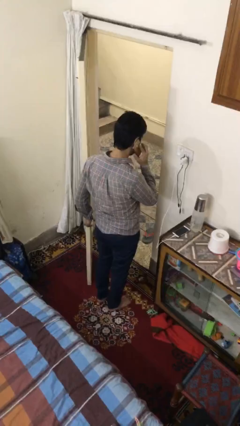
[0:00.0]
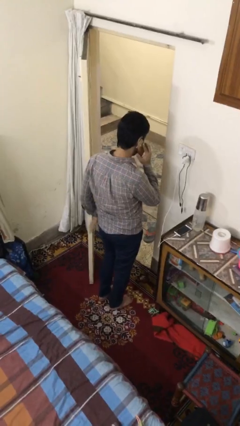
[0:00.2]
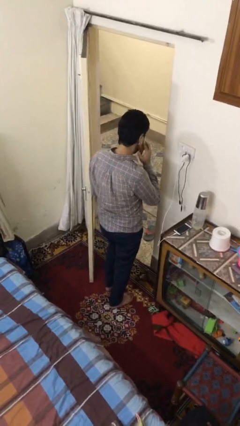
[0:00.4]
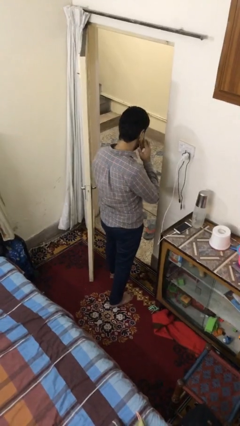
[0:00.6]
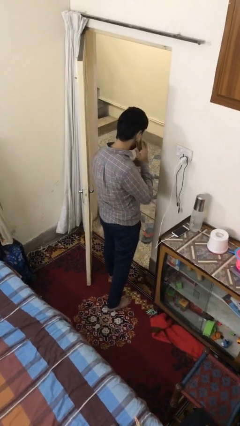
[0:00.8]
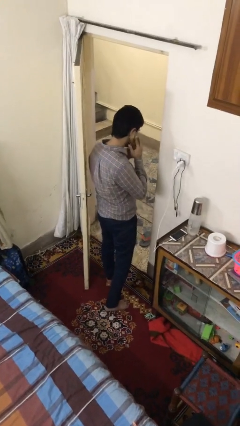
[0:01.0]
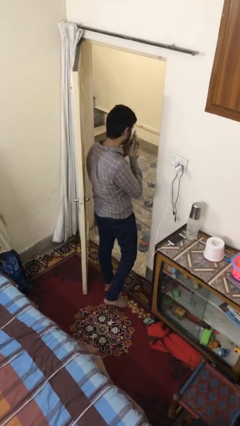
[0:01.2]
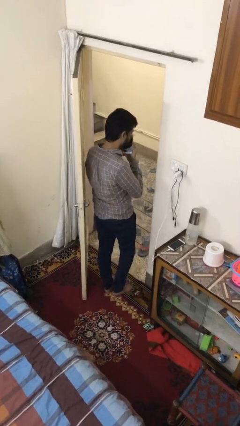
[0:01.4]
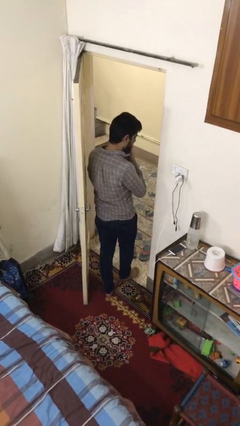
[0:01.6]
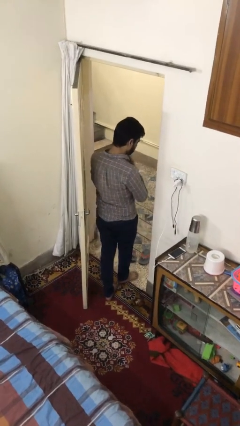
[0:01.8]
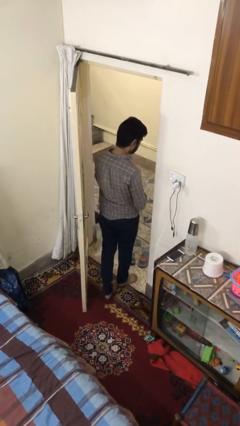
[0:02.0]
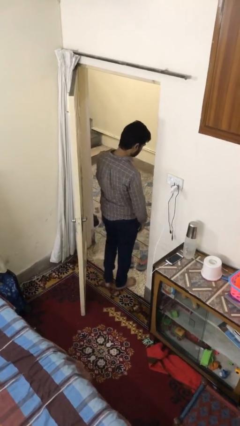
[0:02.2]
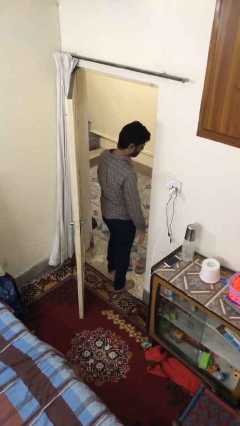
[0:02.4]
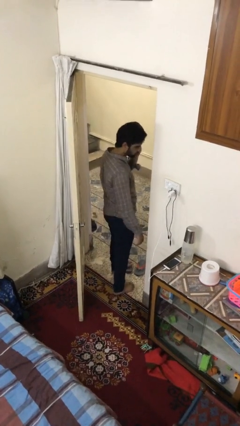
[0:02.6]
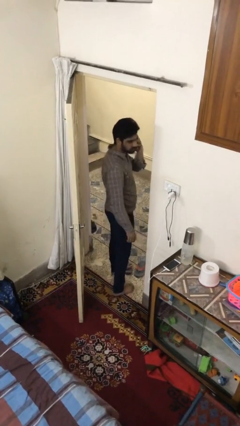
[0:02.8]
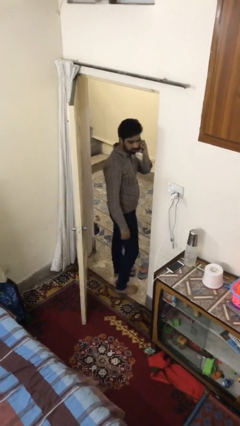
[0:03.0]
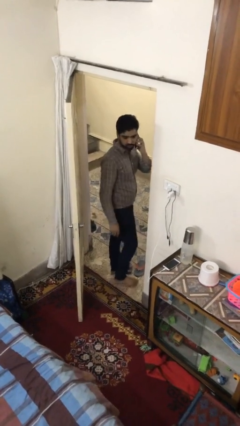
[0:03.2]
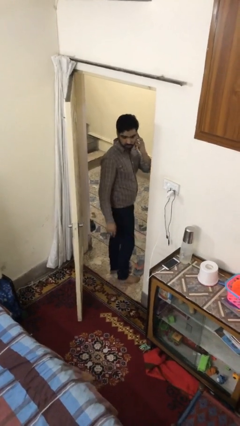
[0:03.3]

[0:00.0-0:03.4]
person exits scene through structure

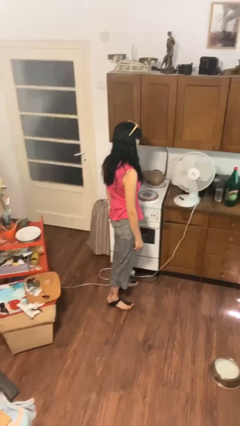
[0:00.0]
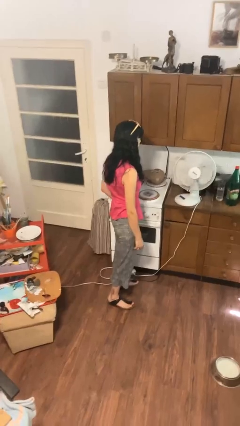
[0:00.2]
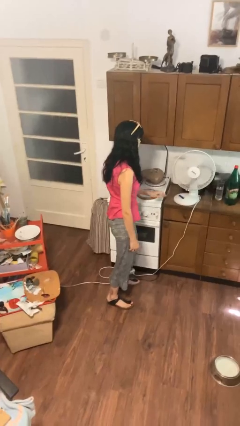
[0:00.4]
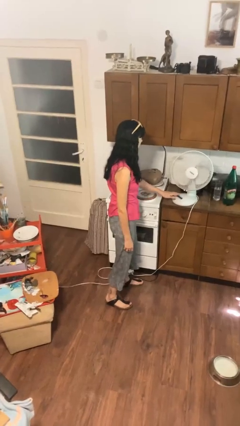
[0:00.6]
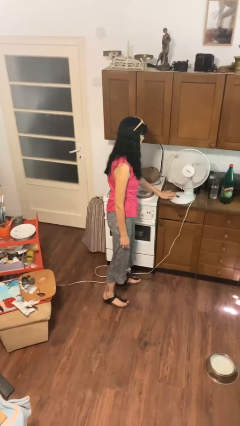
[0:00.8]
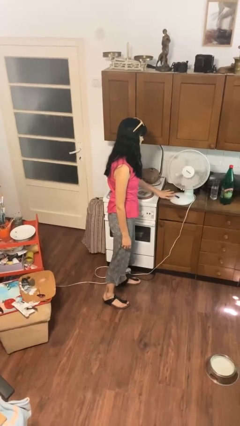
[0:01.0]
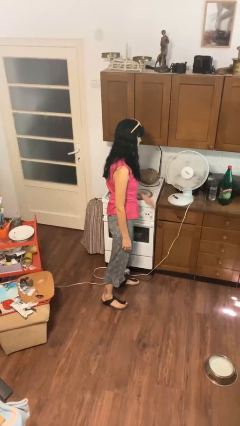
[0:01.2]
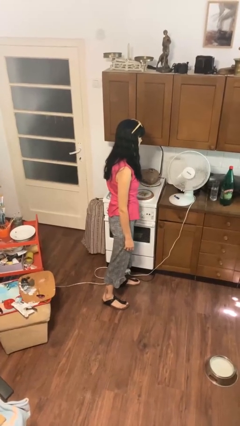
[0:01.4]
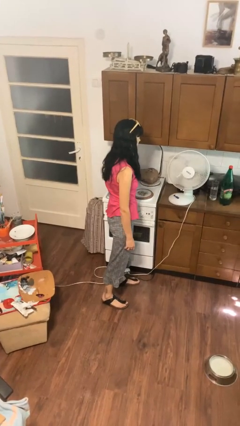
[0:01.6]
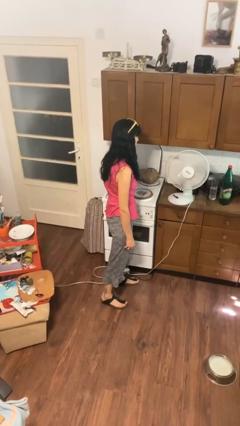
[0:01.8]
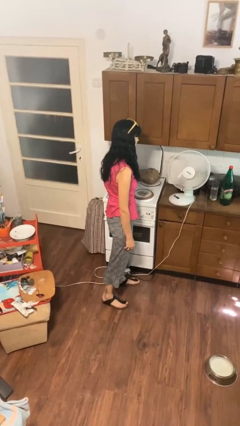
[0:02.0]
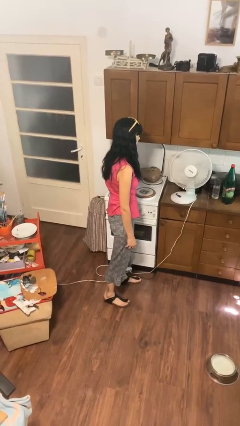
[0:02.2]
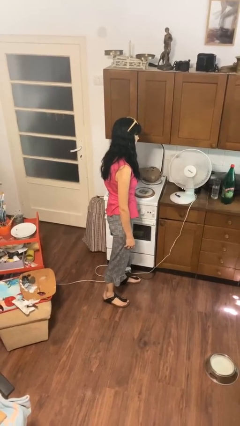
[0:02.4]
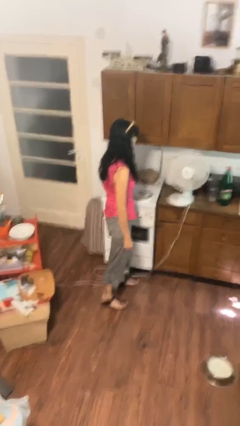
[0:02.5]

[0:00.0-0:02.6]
person turns on fan

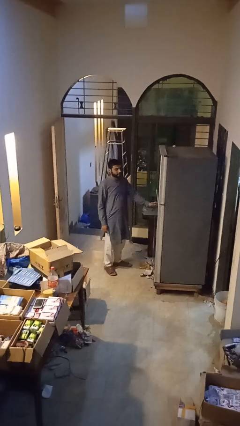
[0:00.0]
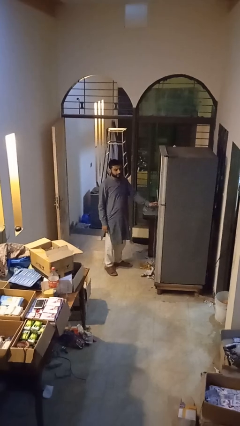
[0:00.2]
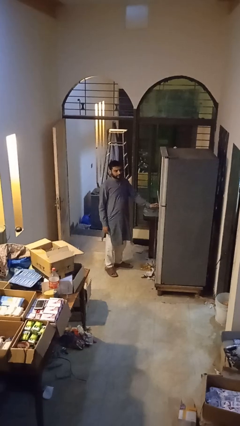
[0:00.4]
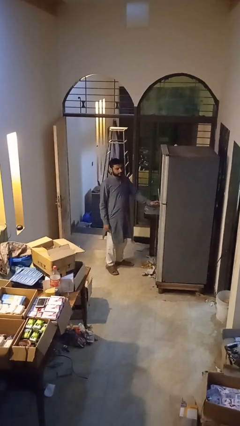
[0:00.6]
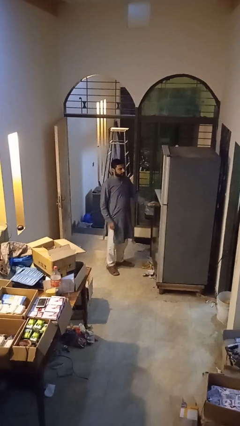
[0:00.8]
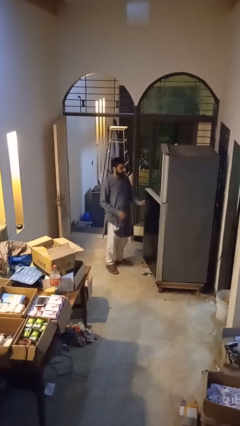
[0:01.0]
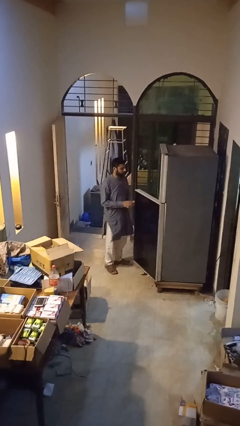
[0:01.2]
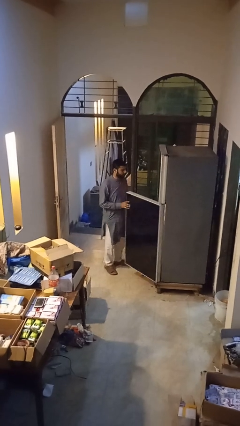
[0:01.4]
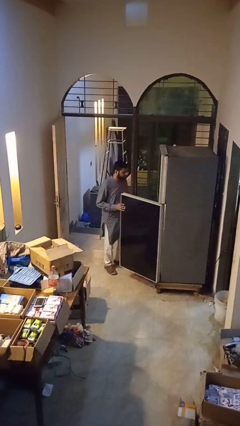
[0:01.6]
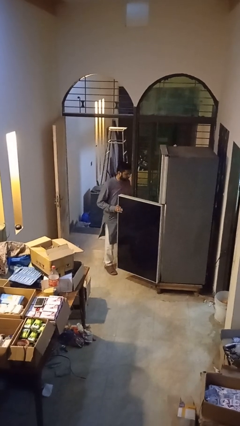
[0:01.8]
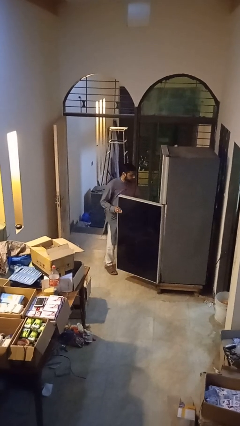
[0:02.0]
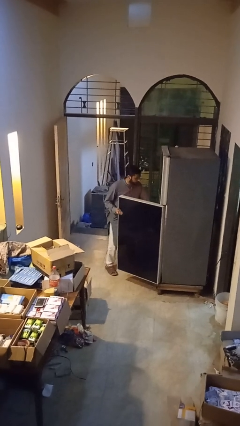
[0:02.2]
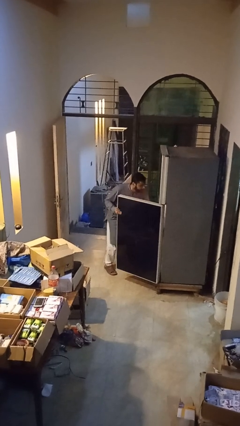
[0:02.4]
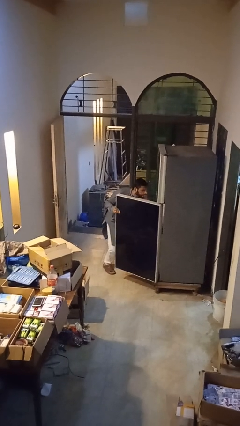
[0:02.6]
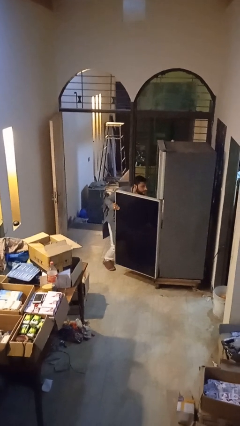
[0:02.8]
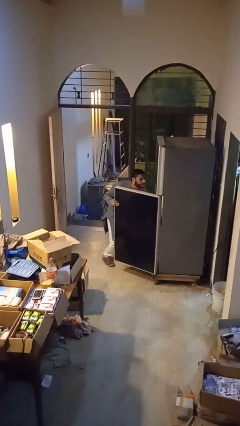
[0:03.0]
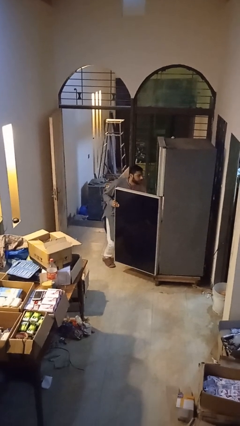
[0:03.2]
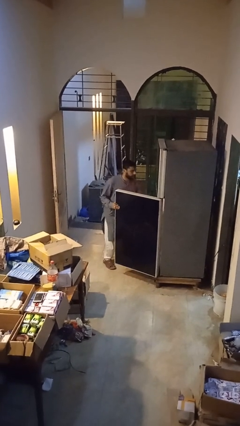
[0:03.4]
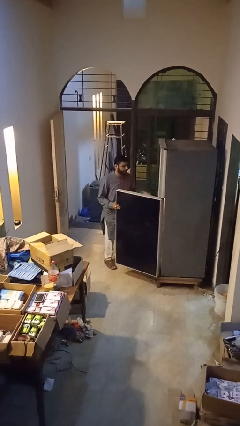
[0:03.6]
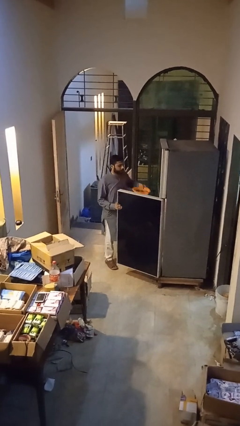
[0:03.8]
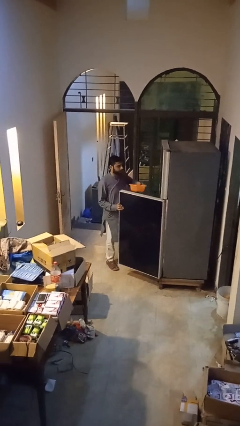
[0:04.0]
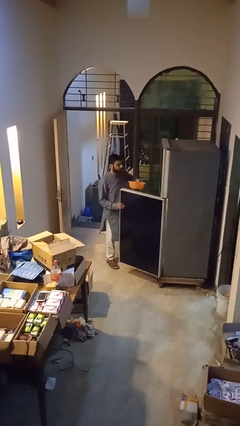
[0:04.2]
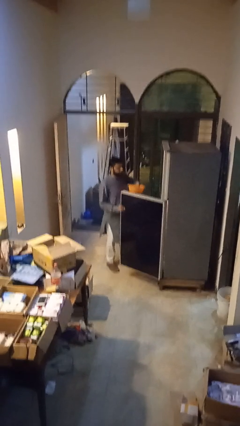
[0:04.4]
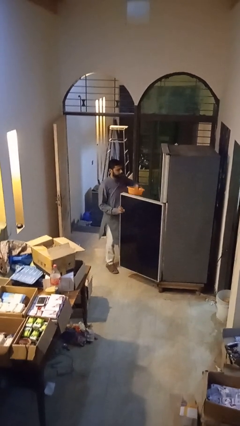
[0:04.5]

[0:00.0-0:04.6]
person puts object into refrigerator

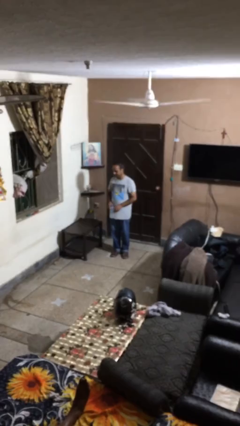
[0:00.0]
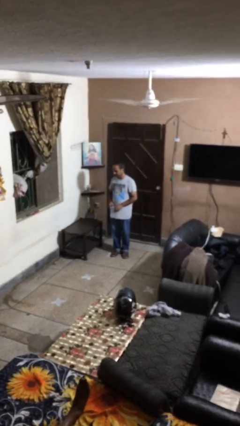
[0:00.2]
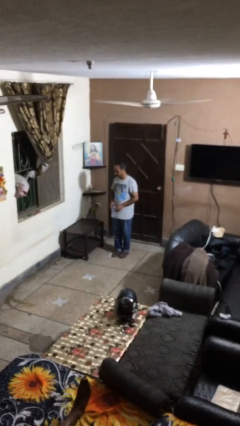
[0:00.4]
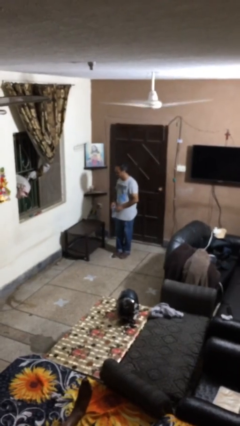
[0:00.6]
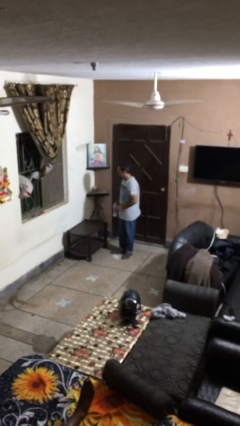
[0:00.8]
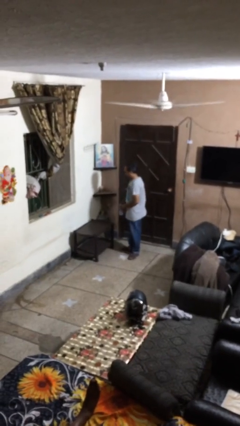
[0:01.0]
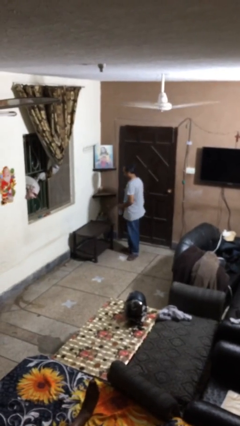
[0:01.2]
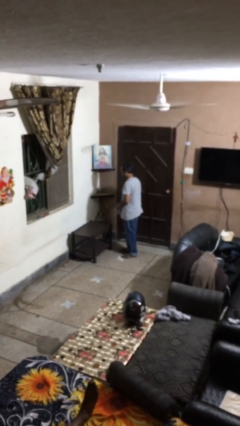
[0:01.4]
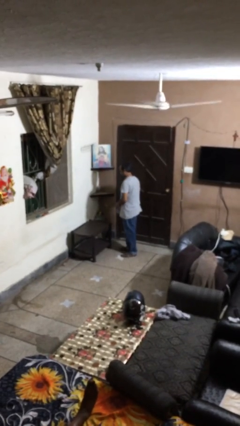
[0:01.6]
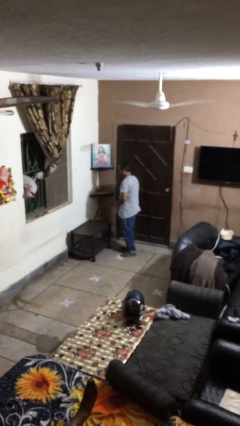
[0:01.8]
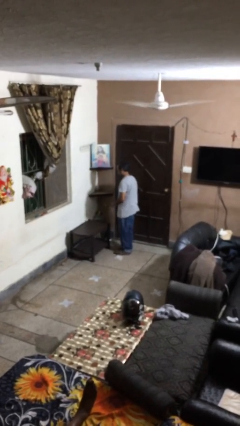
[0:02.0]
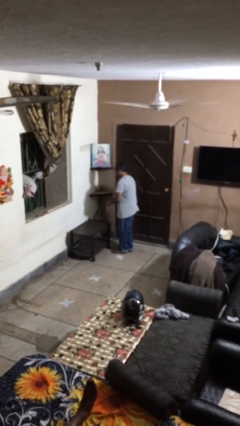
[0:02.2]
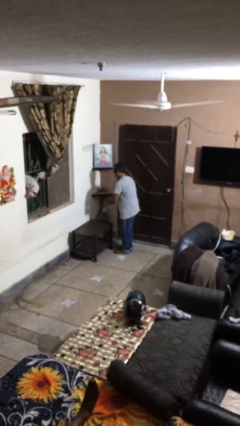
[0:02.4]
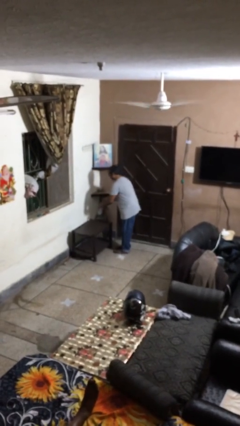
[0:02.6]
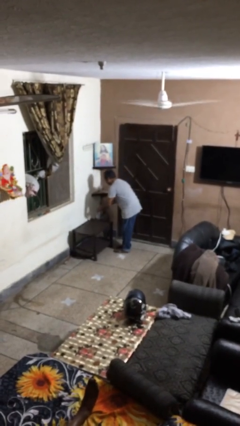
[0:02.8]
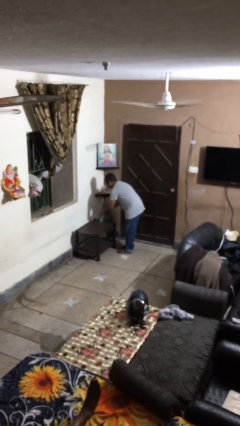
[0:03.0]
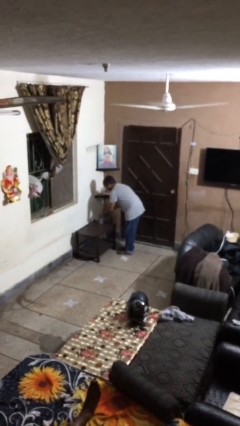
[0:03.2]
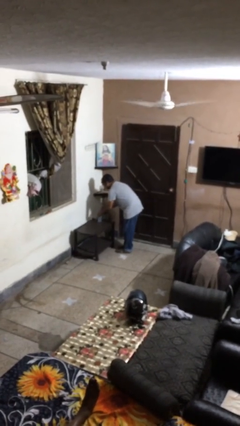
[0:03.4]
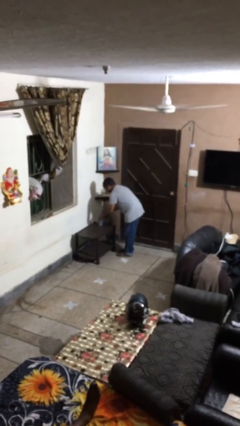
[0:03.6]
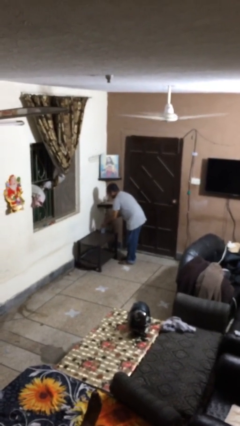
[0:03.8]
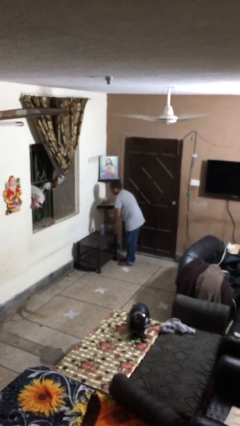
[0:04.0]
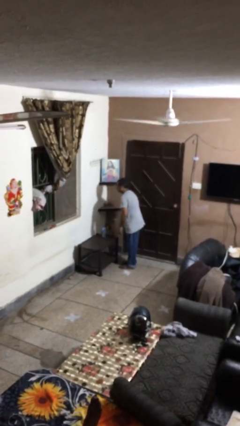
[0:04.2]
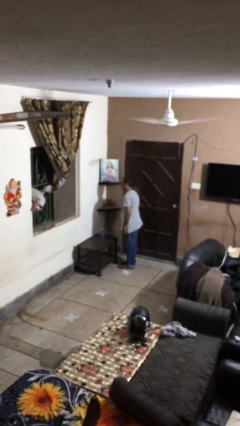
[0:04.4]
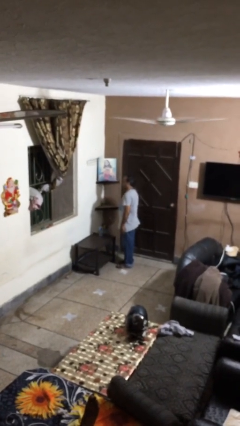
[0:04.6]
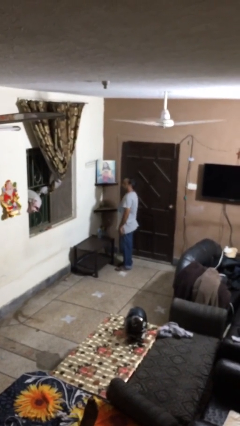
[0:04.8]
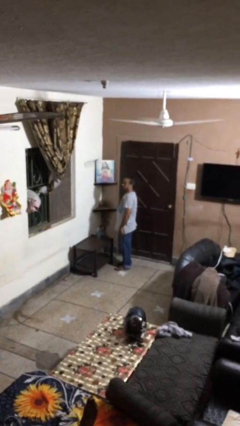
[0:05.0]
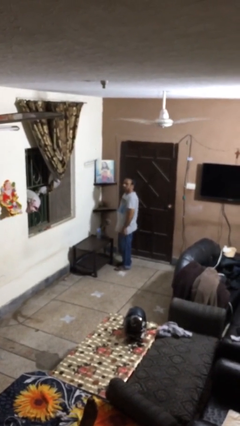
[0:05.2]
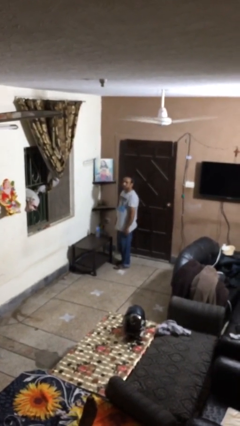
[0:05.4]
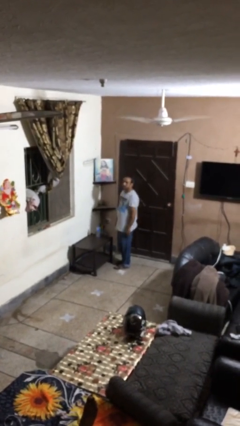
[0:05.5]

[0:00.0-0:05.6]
person puts down object on shelf

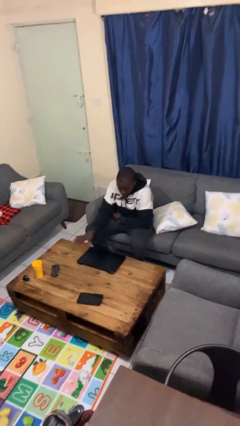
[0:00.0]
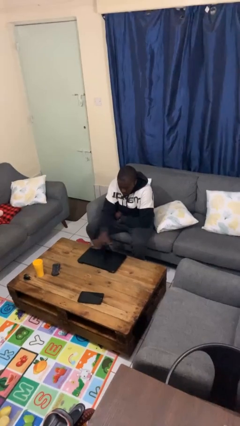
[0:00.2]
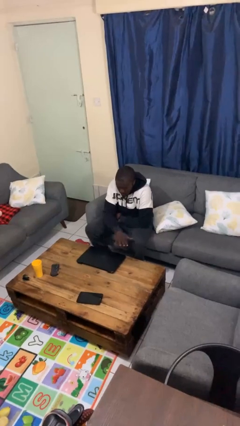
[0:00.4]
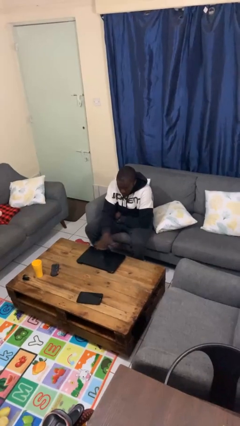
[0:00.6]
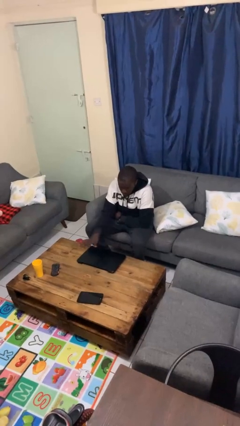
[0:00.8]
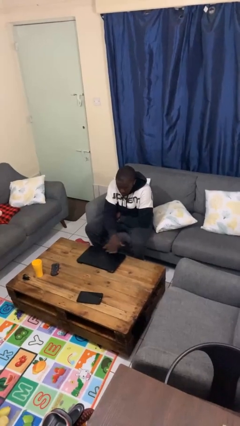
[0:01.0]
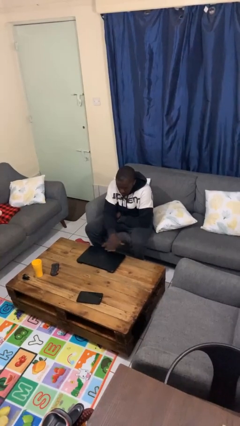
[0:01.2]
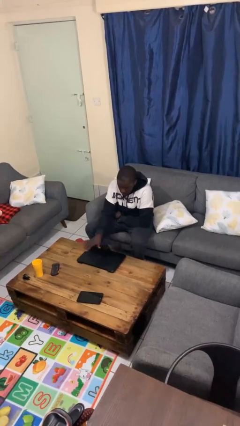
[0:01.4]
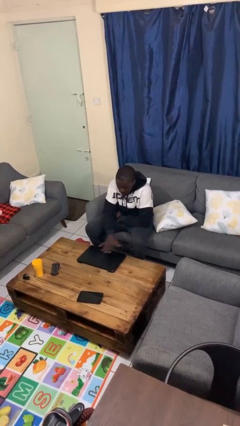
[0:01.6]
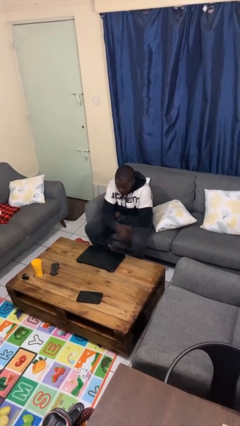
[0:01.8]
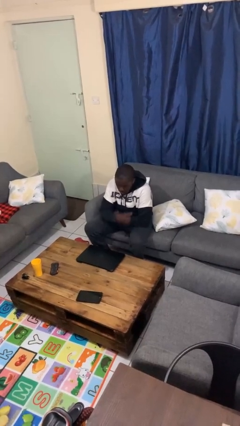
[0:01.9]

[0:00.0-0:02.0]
person waves hand over object
